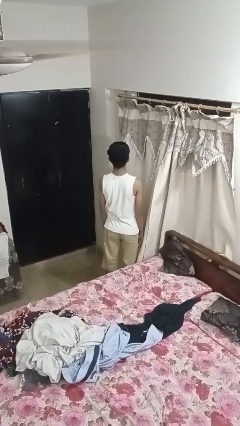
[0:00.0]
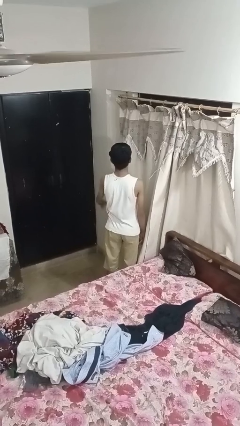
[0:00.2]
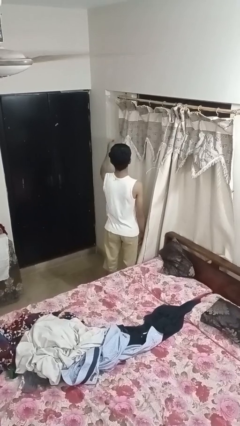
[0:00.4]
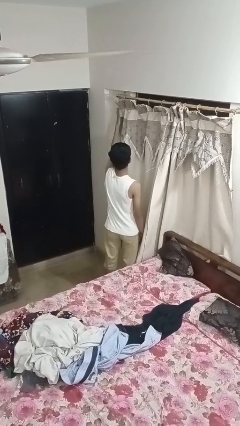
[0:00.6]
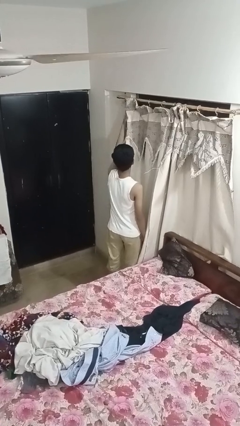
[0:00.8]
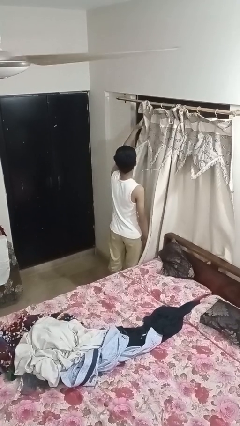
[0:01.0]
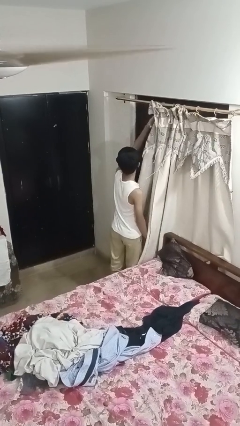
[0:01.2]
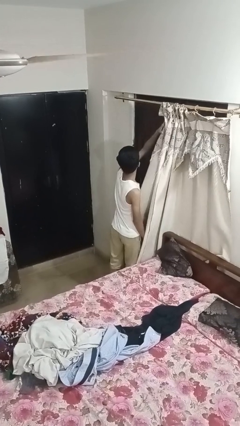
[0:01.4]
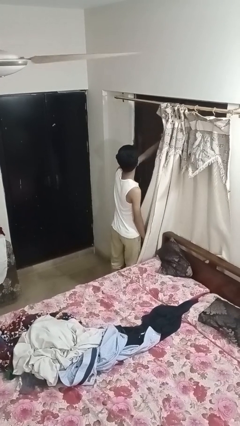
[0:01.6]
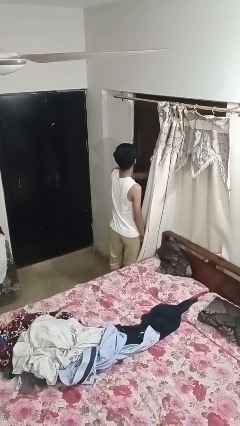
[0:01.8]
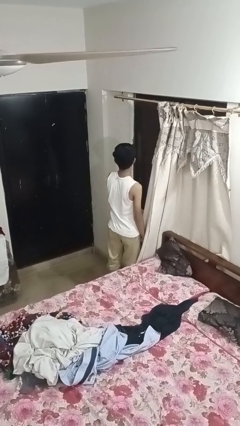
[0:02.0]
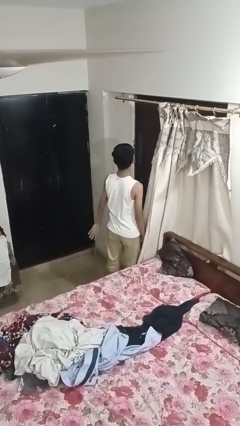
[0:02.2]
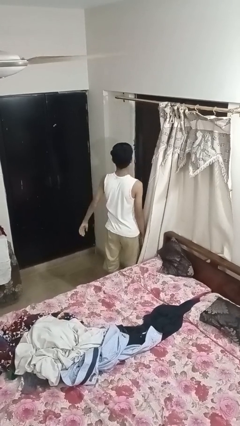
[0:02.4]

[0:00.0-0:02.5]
person opens curtains

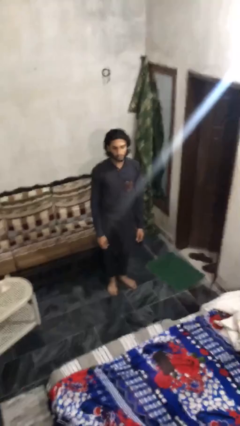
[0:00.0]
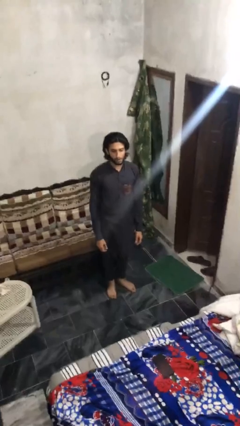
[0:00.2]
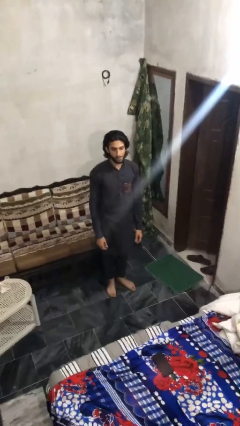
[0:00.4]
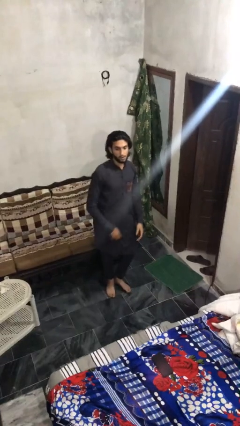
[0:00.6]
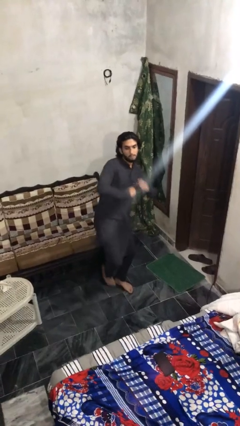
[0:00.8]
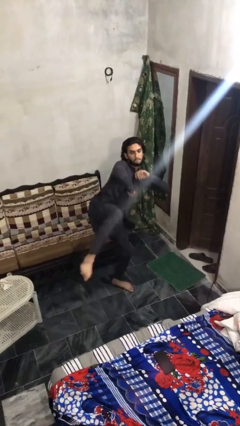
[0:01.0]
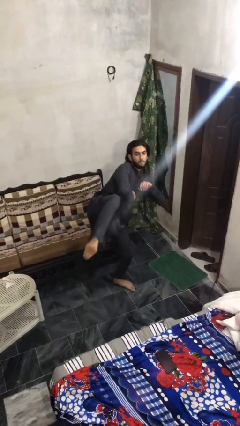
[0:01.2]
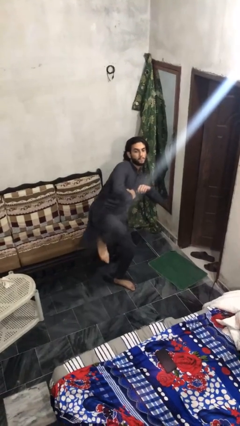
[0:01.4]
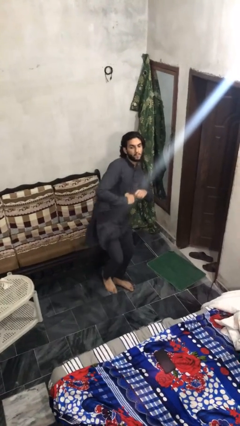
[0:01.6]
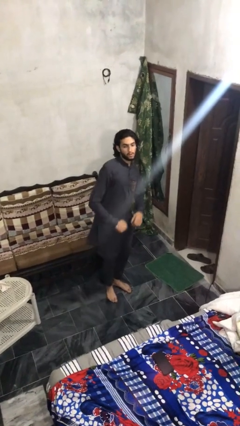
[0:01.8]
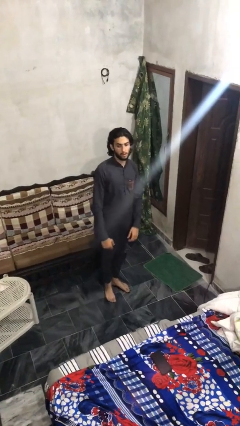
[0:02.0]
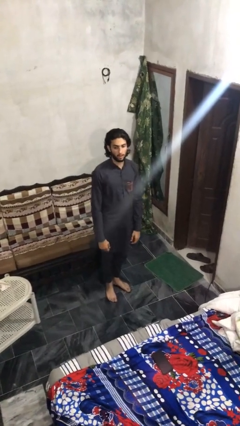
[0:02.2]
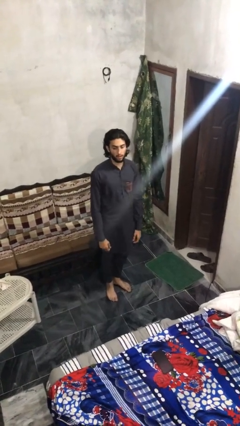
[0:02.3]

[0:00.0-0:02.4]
person karate kicks

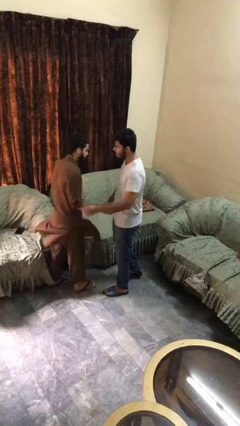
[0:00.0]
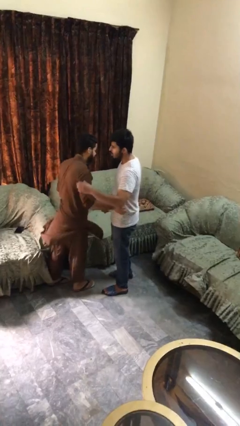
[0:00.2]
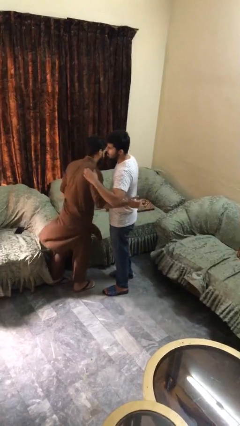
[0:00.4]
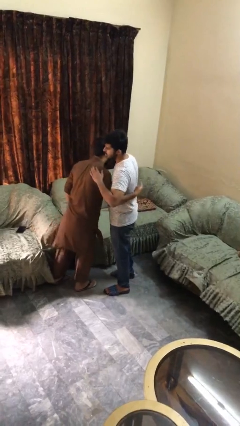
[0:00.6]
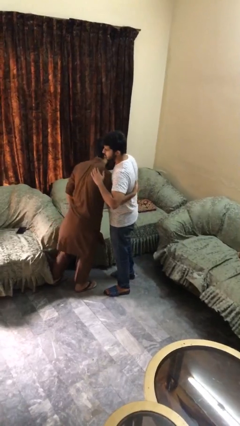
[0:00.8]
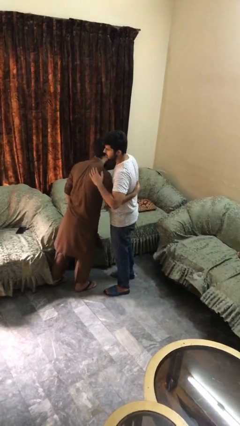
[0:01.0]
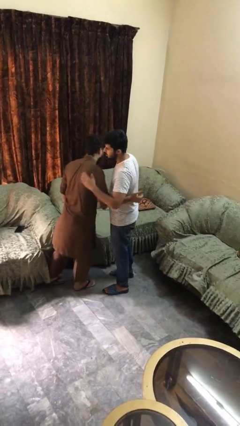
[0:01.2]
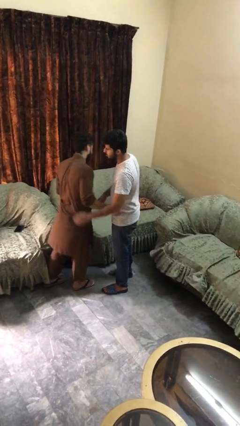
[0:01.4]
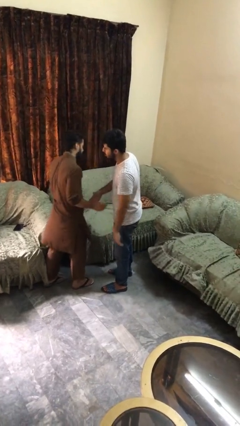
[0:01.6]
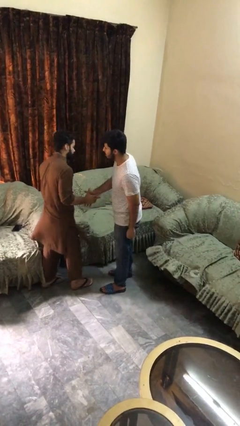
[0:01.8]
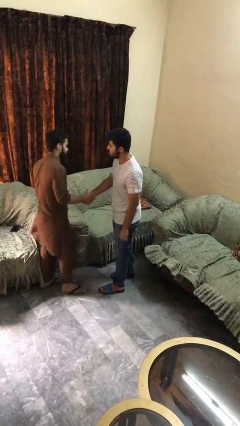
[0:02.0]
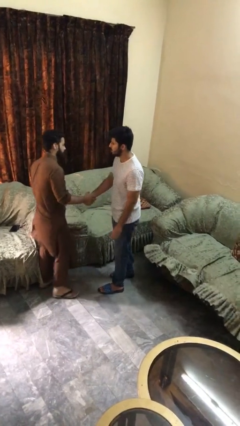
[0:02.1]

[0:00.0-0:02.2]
person embraces person

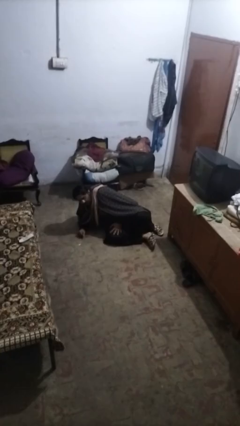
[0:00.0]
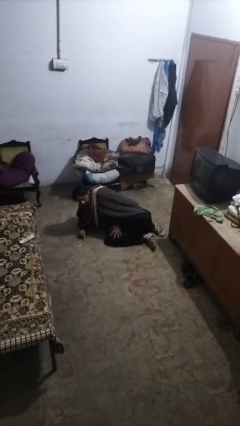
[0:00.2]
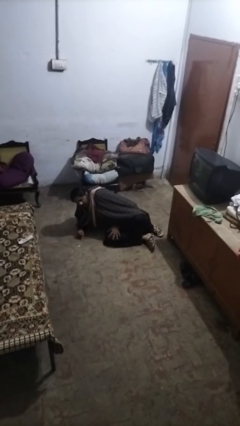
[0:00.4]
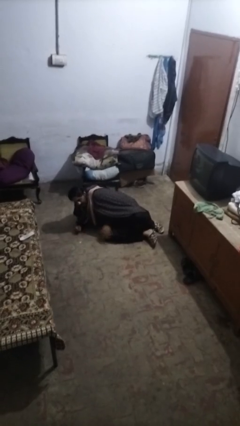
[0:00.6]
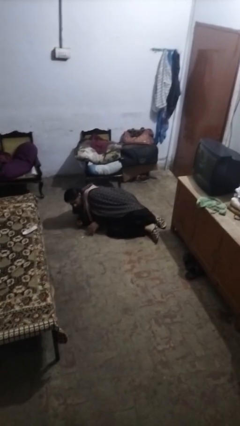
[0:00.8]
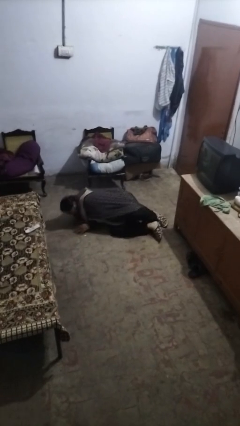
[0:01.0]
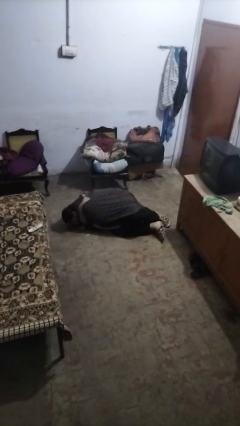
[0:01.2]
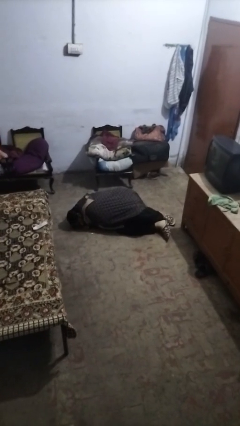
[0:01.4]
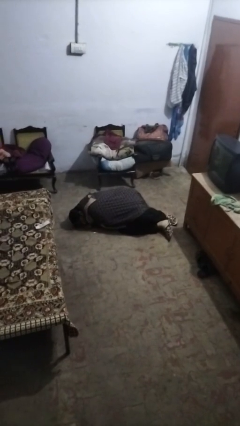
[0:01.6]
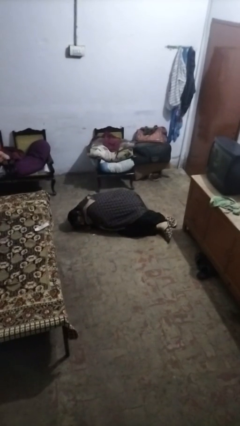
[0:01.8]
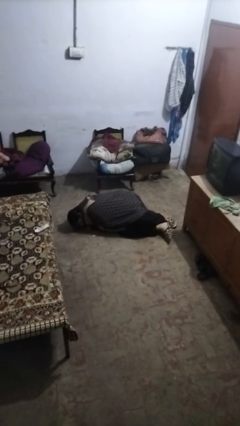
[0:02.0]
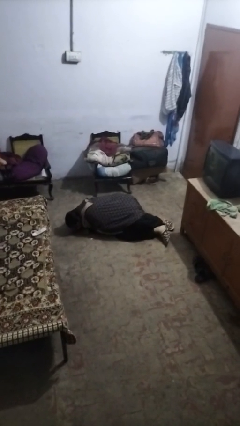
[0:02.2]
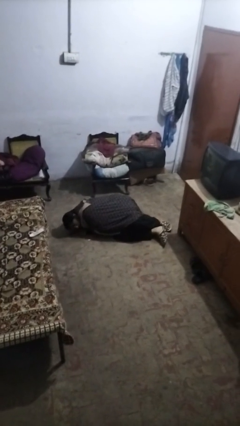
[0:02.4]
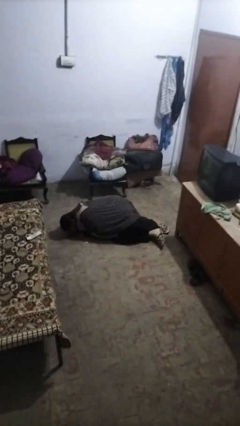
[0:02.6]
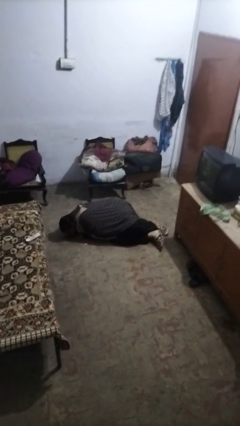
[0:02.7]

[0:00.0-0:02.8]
person lies down on floor

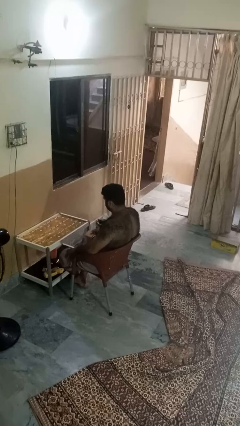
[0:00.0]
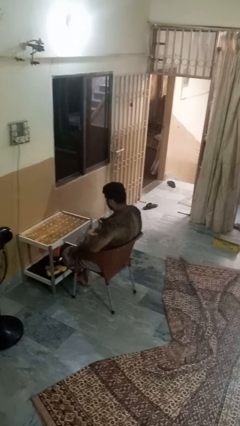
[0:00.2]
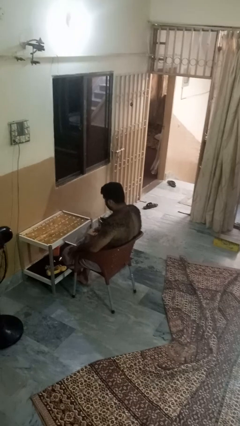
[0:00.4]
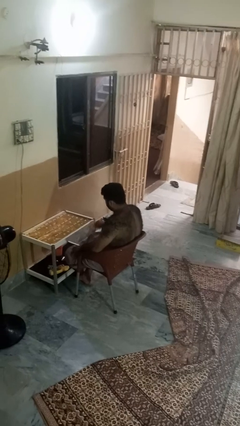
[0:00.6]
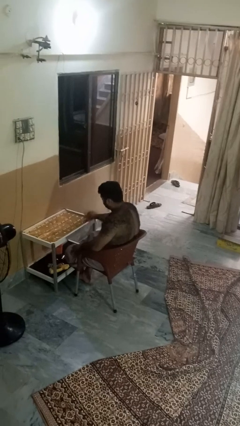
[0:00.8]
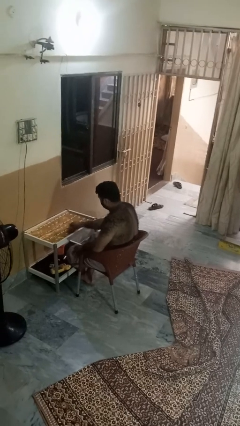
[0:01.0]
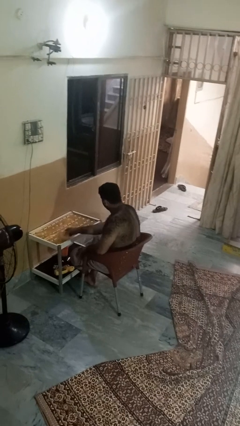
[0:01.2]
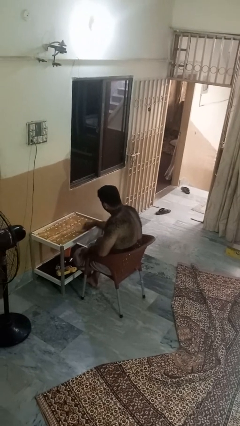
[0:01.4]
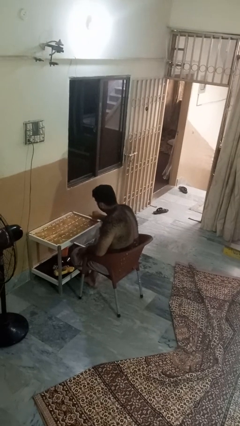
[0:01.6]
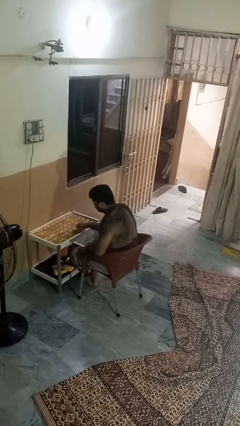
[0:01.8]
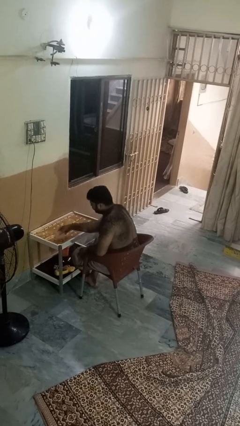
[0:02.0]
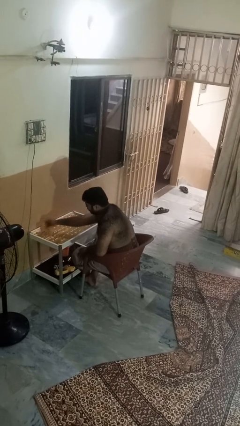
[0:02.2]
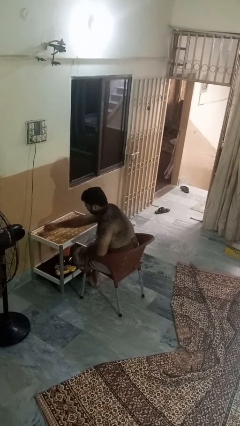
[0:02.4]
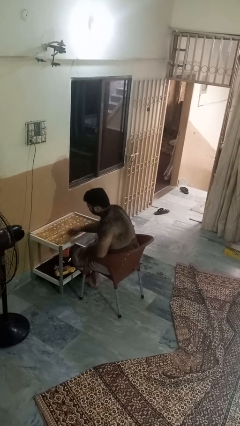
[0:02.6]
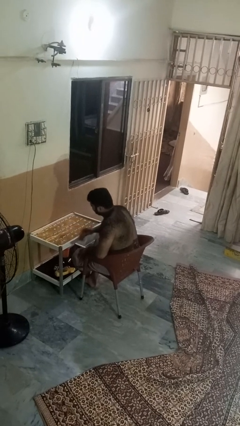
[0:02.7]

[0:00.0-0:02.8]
person cleans table with rag

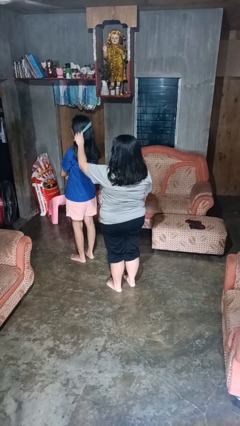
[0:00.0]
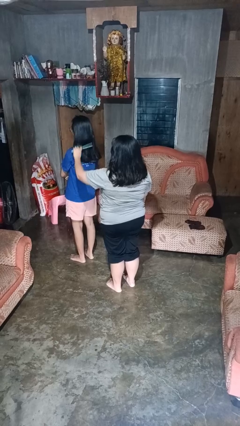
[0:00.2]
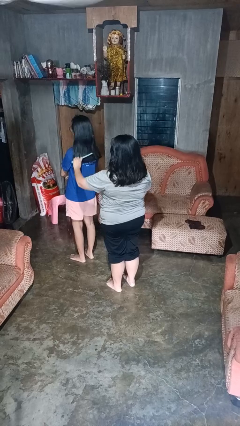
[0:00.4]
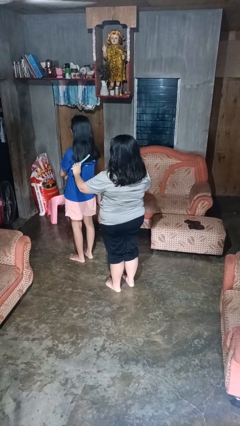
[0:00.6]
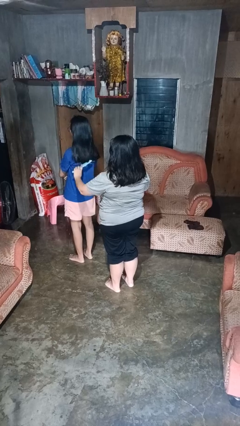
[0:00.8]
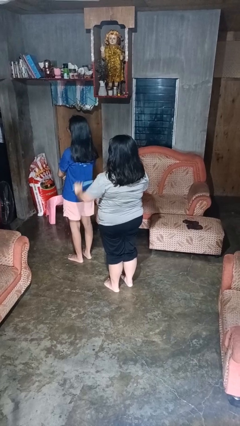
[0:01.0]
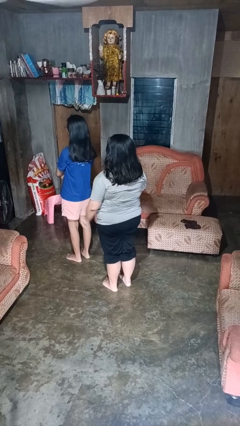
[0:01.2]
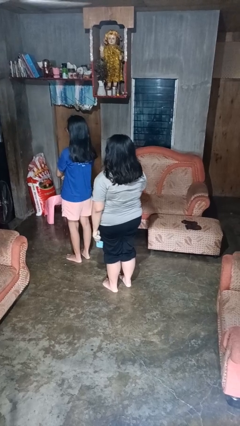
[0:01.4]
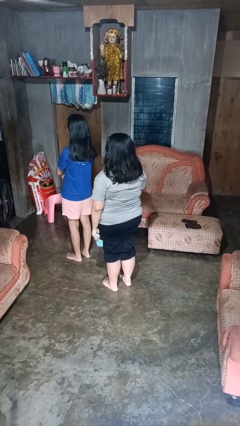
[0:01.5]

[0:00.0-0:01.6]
person brushes hair of person

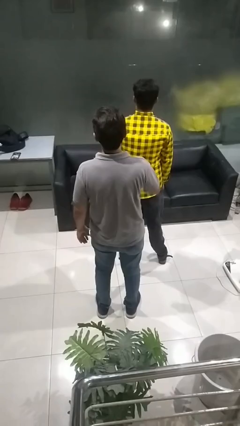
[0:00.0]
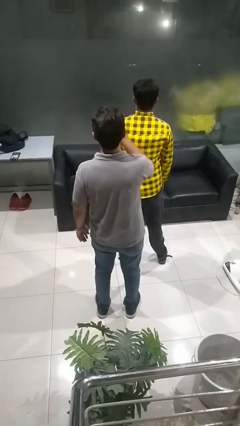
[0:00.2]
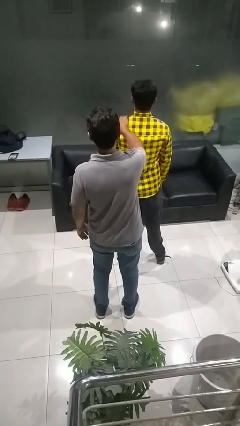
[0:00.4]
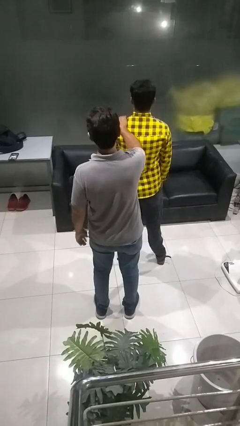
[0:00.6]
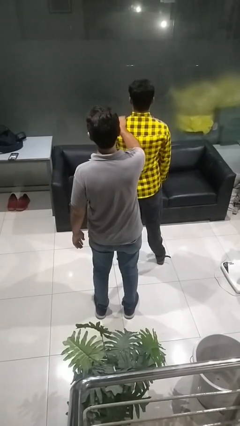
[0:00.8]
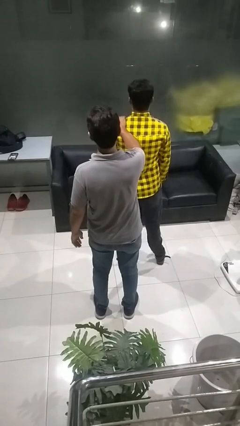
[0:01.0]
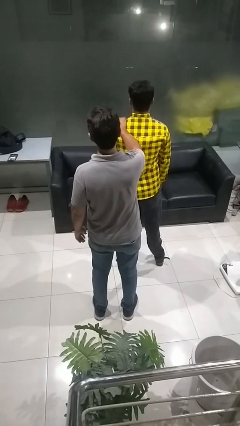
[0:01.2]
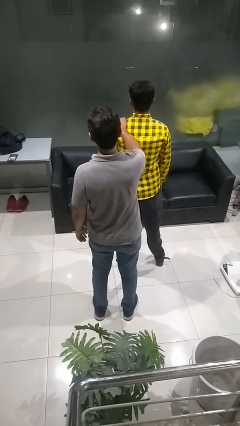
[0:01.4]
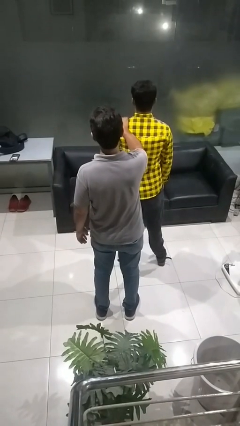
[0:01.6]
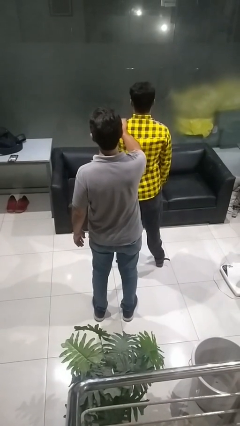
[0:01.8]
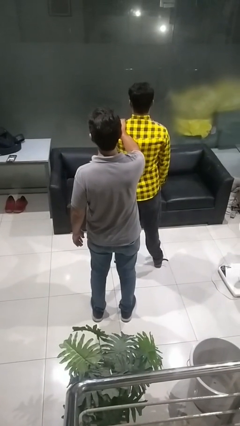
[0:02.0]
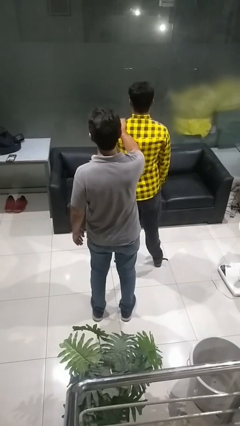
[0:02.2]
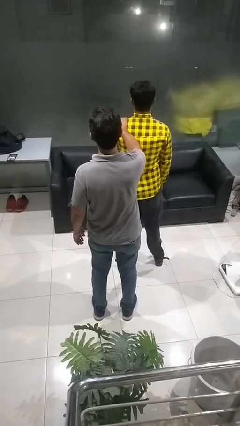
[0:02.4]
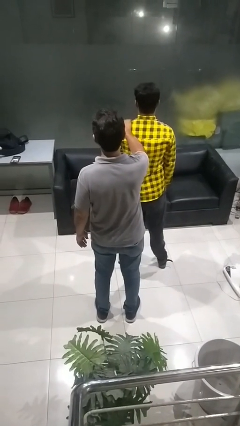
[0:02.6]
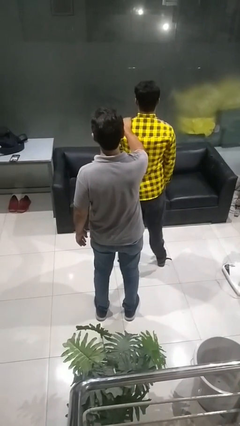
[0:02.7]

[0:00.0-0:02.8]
person grabs person by shoulder
